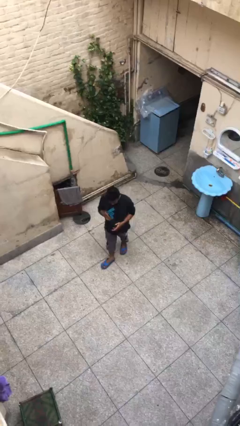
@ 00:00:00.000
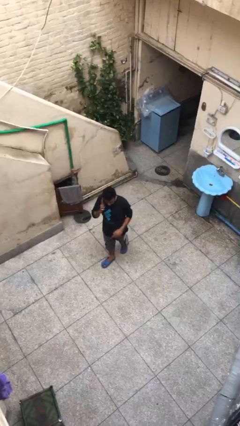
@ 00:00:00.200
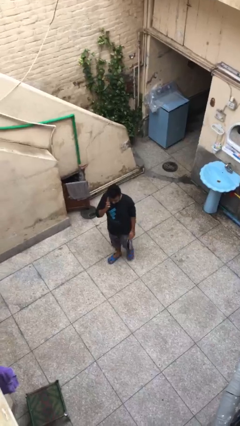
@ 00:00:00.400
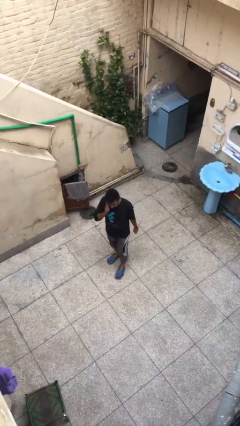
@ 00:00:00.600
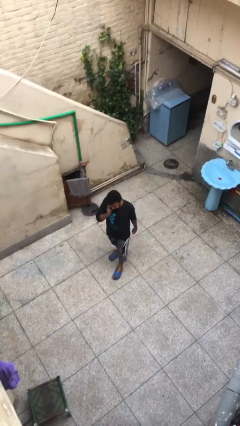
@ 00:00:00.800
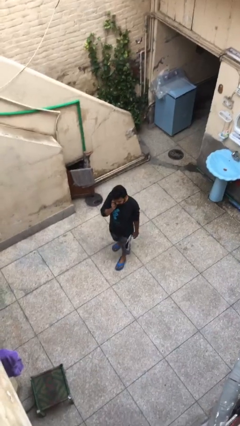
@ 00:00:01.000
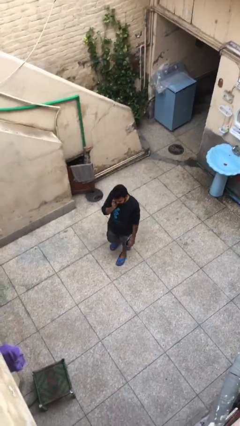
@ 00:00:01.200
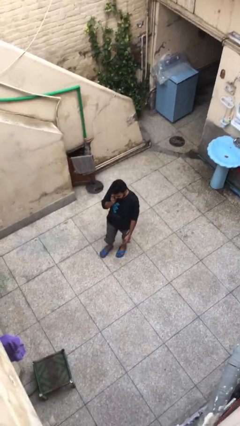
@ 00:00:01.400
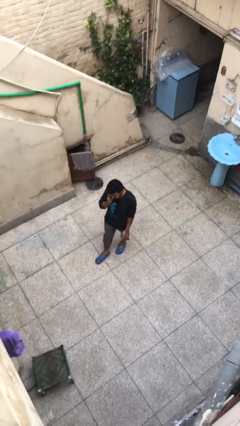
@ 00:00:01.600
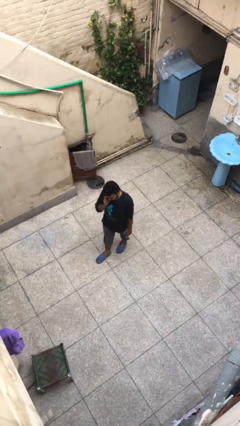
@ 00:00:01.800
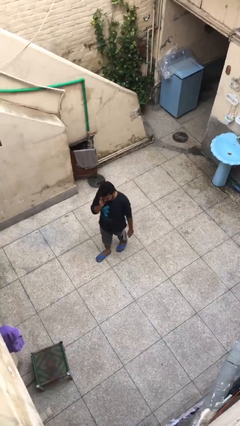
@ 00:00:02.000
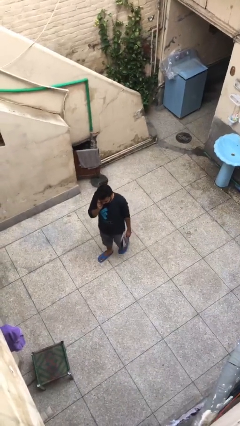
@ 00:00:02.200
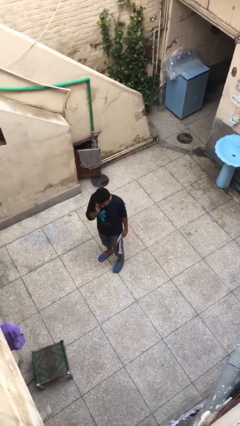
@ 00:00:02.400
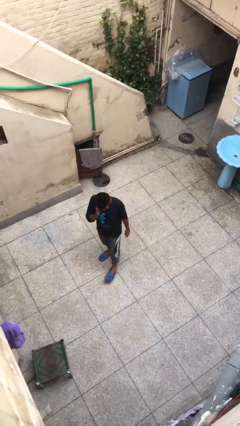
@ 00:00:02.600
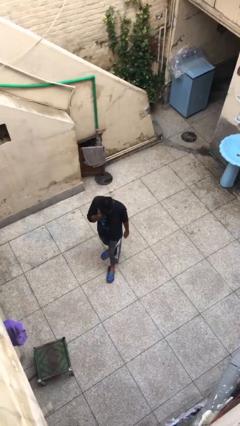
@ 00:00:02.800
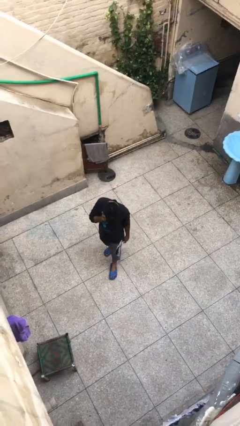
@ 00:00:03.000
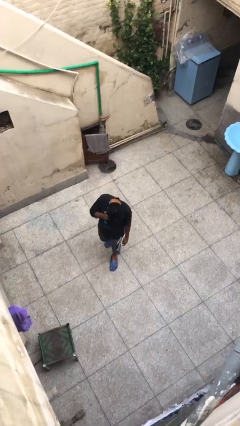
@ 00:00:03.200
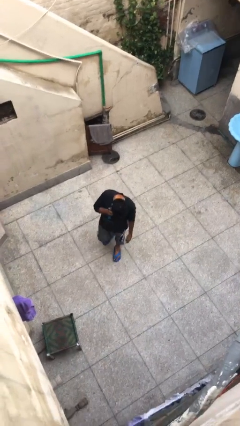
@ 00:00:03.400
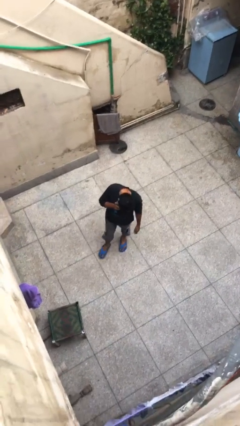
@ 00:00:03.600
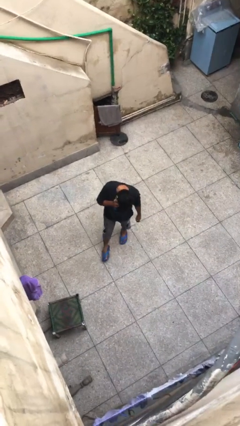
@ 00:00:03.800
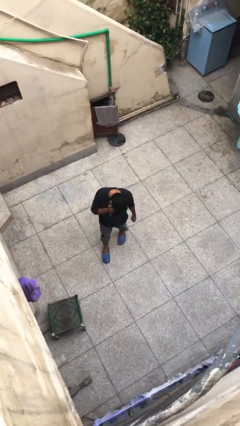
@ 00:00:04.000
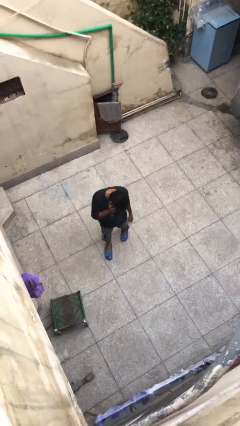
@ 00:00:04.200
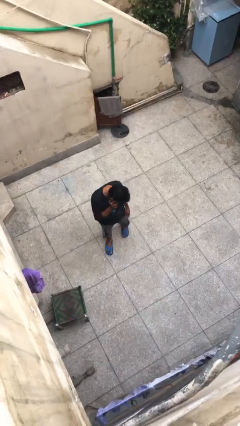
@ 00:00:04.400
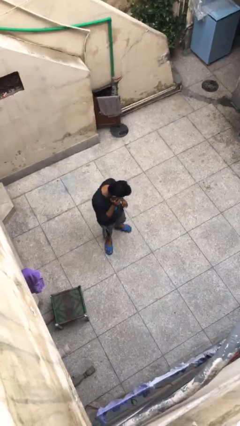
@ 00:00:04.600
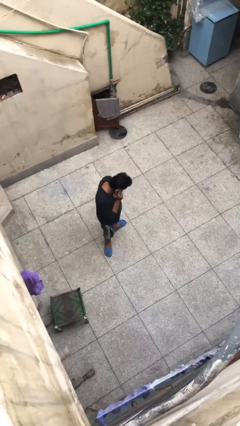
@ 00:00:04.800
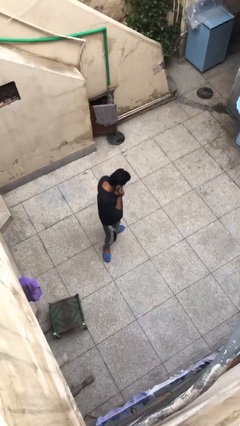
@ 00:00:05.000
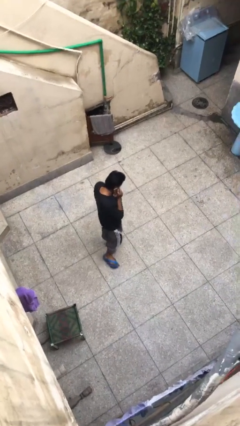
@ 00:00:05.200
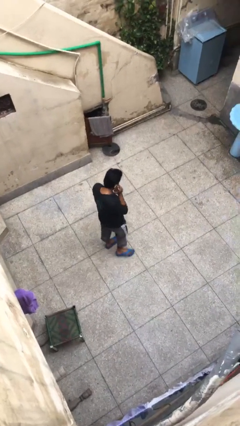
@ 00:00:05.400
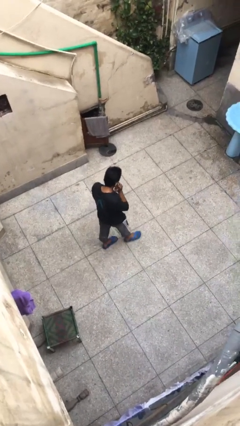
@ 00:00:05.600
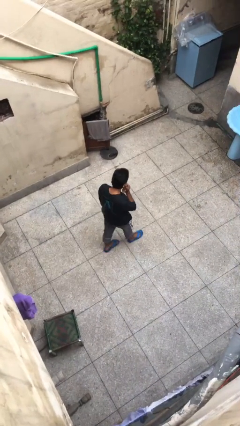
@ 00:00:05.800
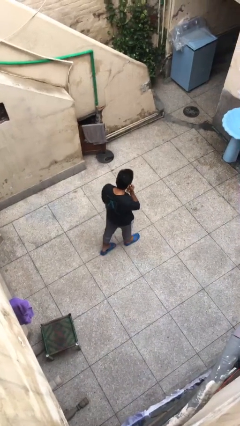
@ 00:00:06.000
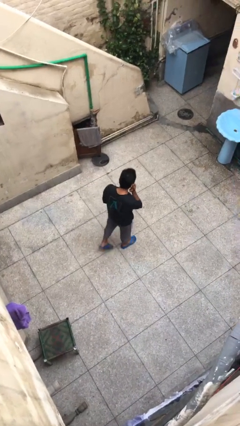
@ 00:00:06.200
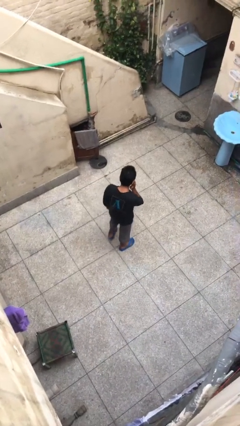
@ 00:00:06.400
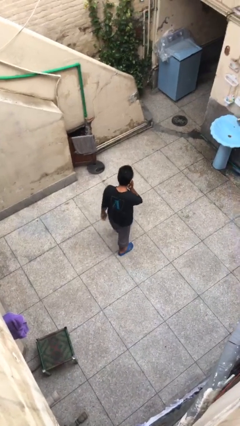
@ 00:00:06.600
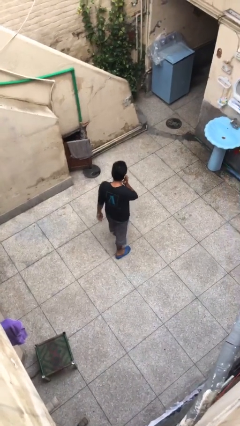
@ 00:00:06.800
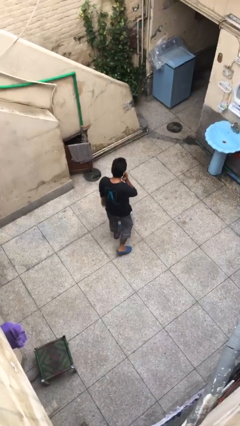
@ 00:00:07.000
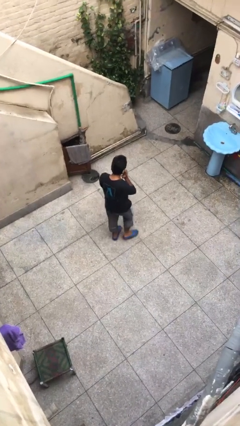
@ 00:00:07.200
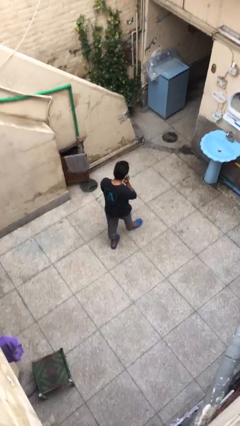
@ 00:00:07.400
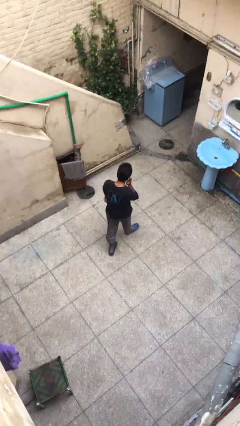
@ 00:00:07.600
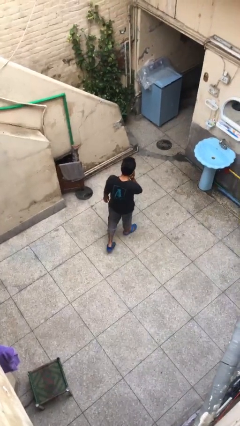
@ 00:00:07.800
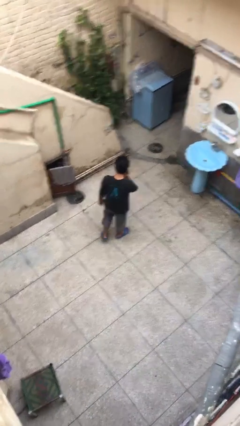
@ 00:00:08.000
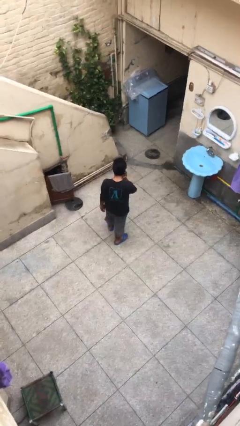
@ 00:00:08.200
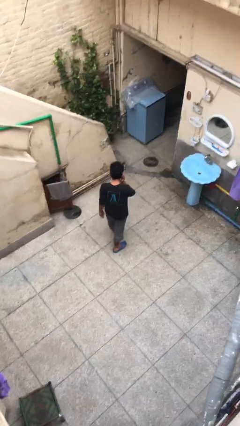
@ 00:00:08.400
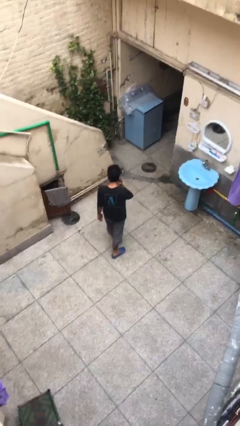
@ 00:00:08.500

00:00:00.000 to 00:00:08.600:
person talks on phone

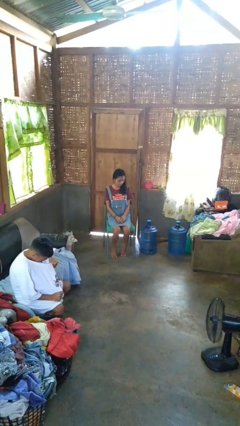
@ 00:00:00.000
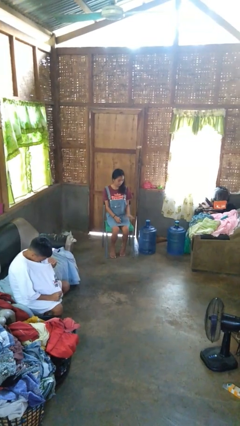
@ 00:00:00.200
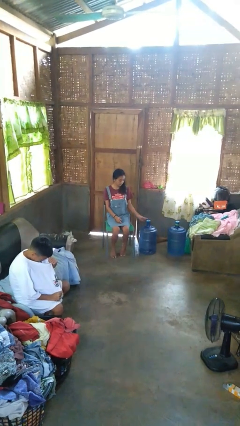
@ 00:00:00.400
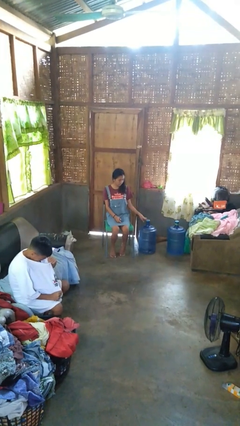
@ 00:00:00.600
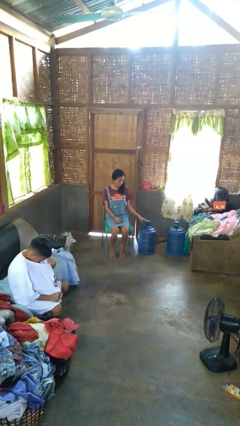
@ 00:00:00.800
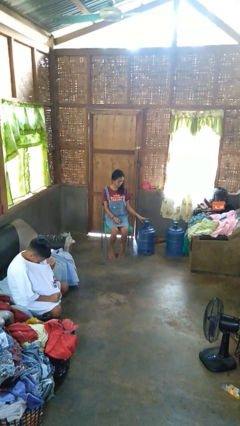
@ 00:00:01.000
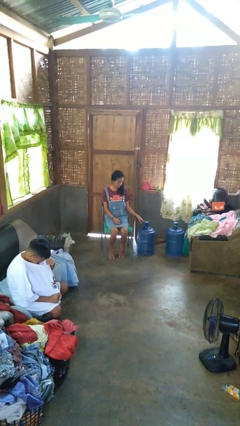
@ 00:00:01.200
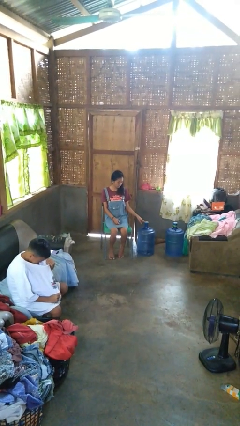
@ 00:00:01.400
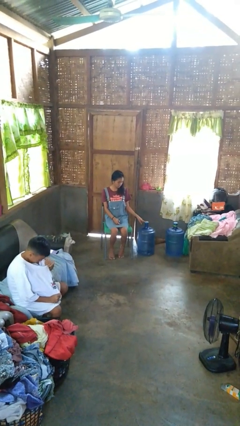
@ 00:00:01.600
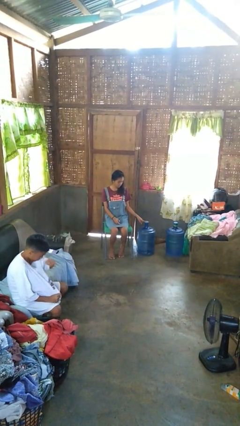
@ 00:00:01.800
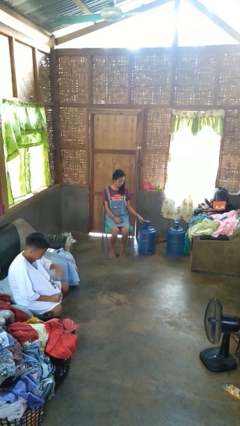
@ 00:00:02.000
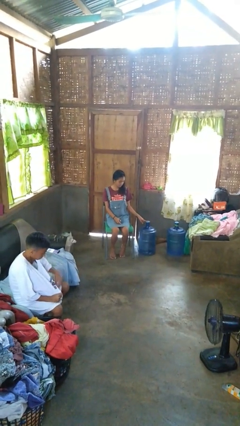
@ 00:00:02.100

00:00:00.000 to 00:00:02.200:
person taps object with finger

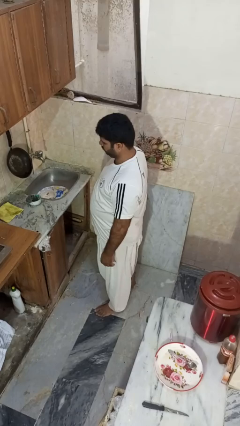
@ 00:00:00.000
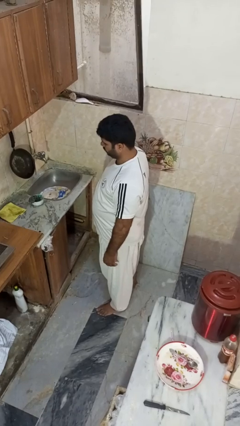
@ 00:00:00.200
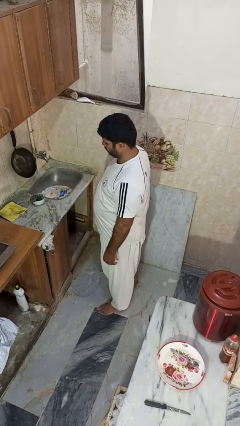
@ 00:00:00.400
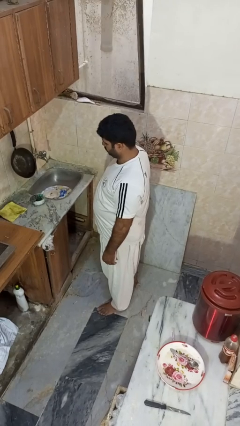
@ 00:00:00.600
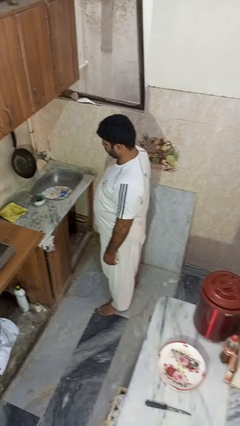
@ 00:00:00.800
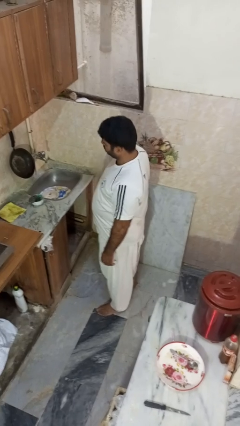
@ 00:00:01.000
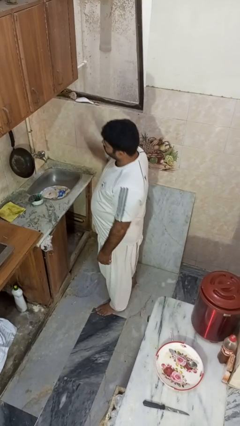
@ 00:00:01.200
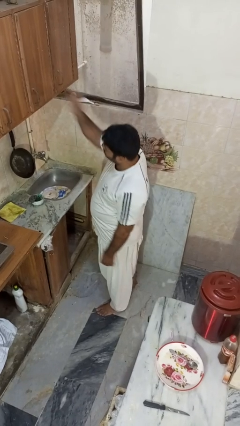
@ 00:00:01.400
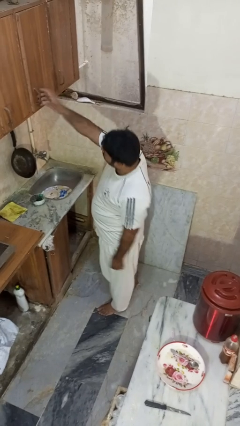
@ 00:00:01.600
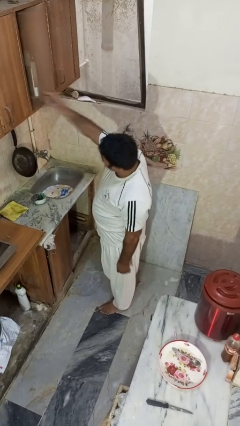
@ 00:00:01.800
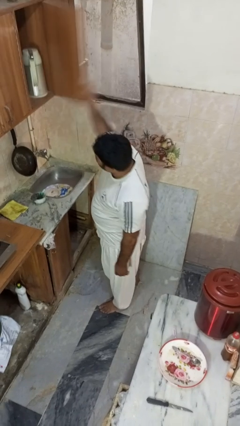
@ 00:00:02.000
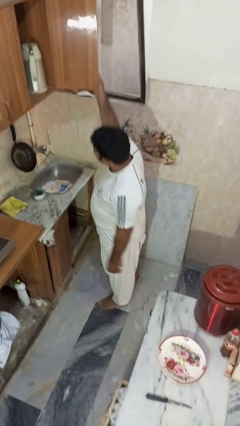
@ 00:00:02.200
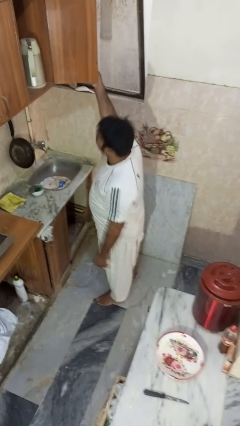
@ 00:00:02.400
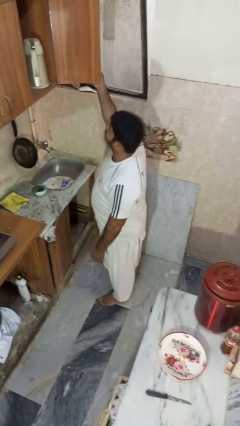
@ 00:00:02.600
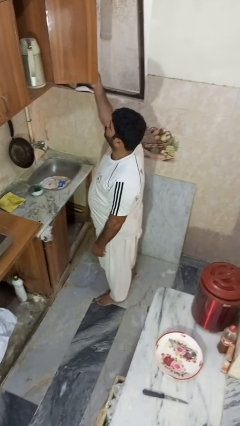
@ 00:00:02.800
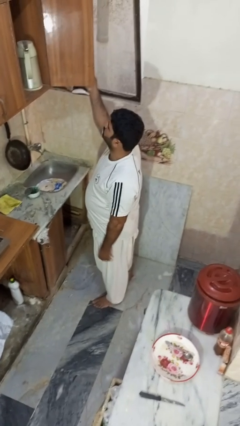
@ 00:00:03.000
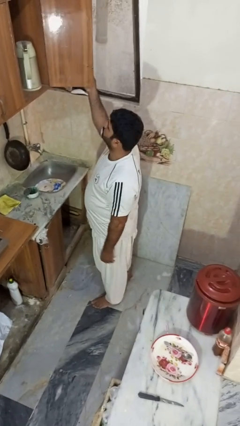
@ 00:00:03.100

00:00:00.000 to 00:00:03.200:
person opens cabinet

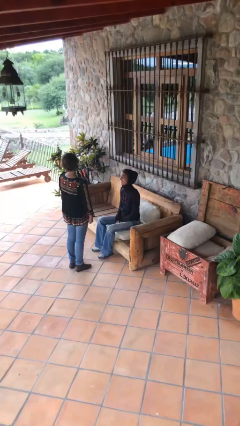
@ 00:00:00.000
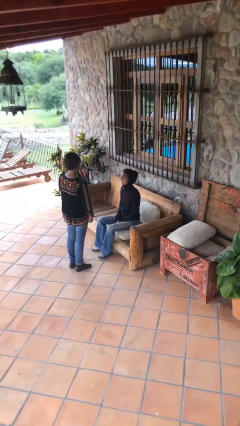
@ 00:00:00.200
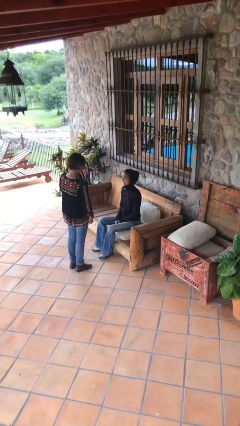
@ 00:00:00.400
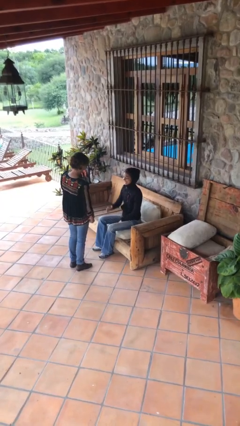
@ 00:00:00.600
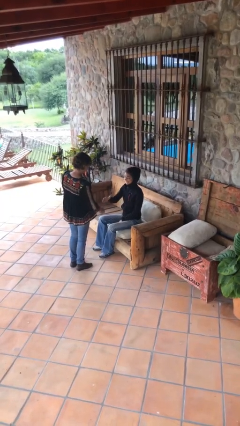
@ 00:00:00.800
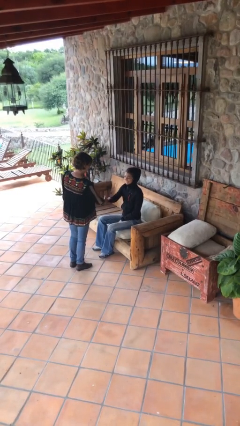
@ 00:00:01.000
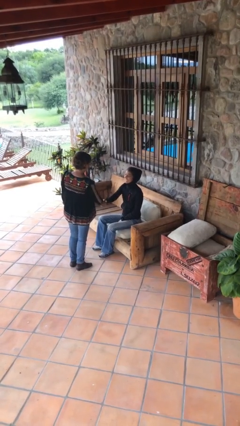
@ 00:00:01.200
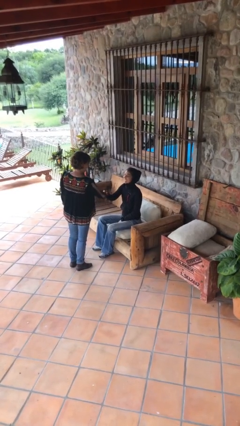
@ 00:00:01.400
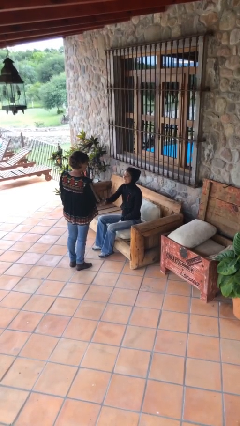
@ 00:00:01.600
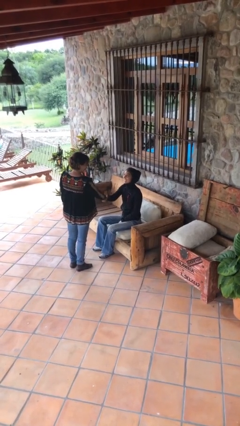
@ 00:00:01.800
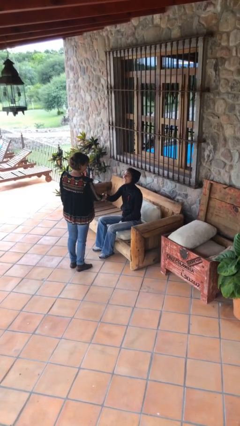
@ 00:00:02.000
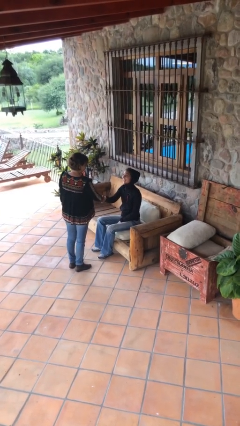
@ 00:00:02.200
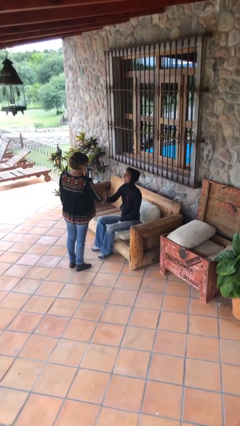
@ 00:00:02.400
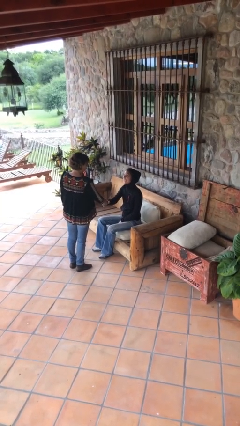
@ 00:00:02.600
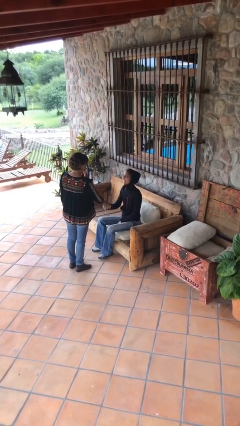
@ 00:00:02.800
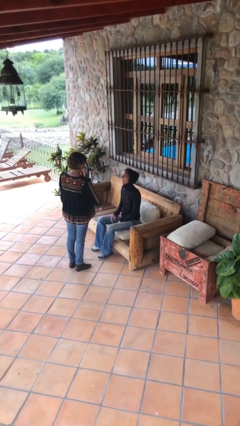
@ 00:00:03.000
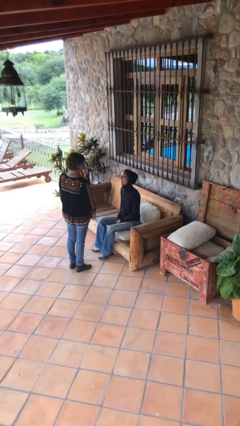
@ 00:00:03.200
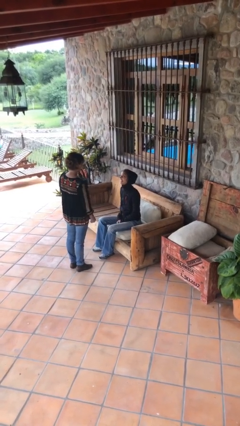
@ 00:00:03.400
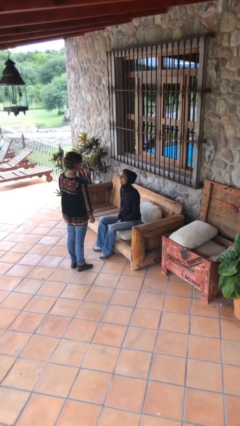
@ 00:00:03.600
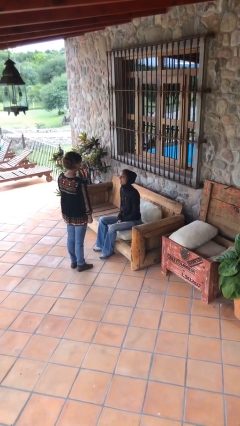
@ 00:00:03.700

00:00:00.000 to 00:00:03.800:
person shakes hand
